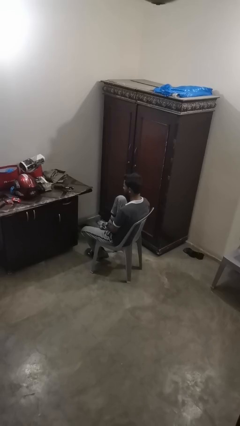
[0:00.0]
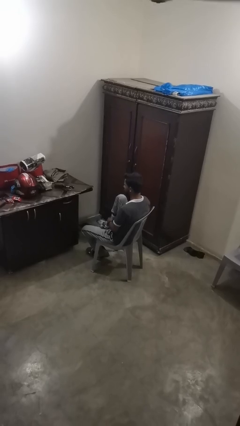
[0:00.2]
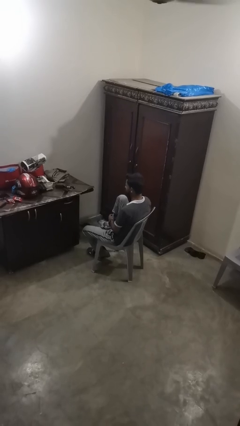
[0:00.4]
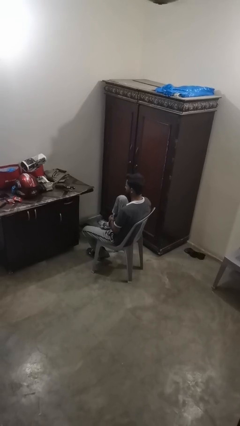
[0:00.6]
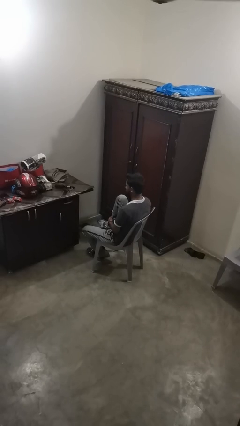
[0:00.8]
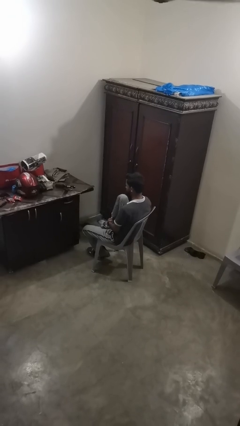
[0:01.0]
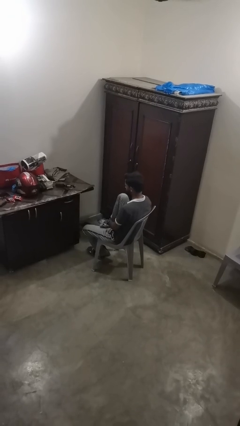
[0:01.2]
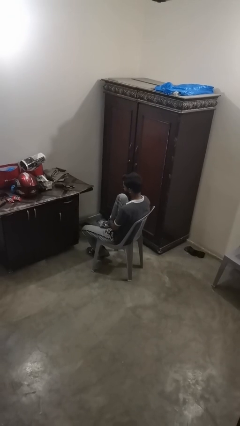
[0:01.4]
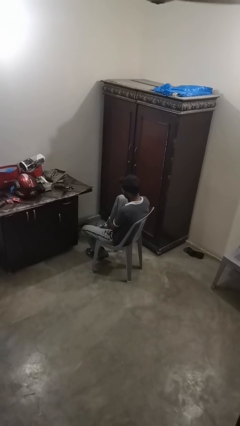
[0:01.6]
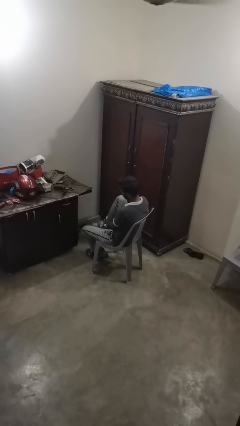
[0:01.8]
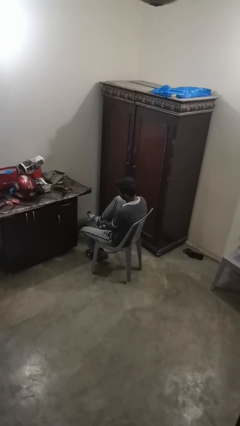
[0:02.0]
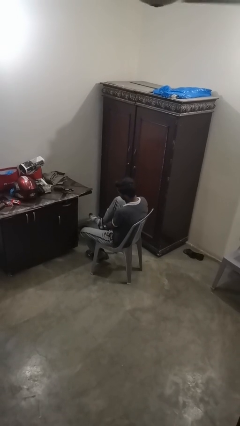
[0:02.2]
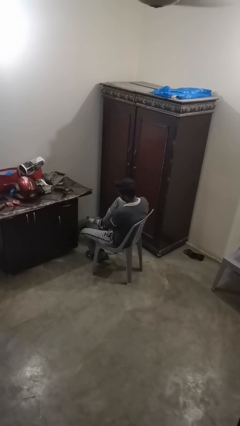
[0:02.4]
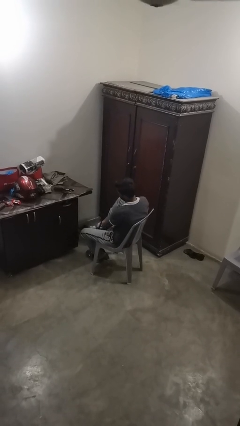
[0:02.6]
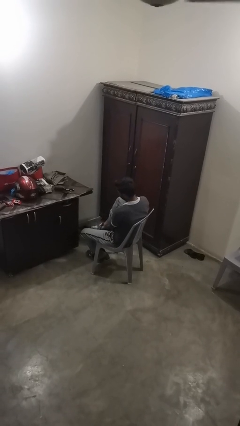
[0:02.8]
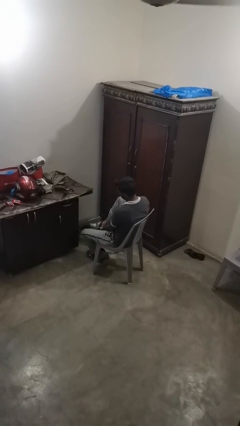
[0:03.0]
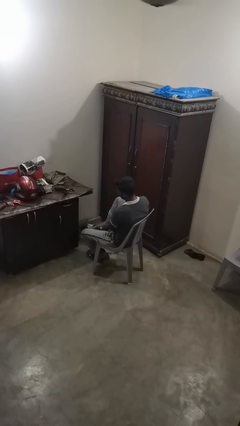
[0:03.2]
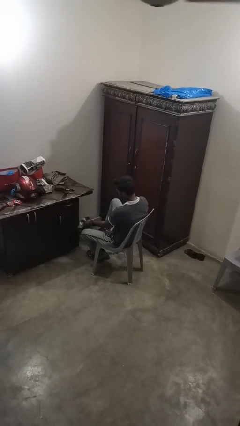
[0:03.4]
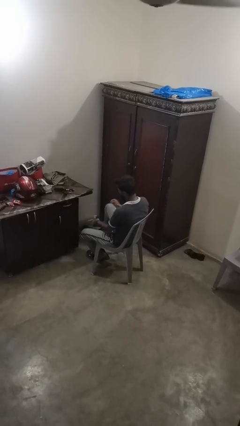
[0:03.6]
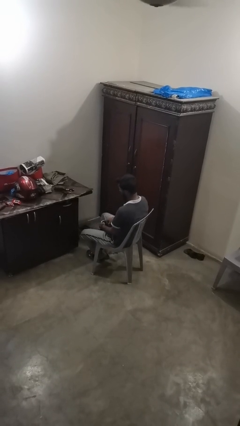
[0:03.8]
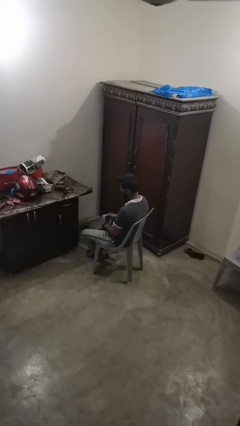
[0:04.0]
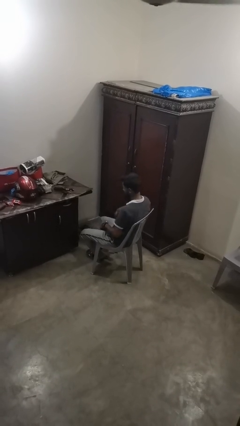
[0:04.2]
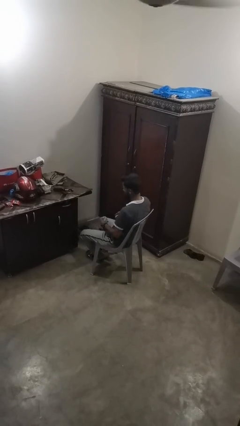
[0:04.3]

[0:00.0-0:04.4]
person takes off socks

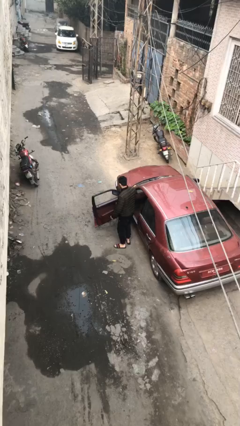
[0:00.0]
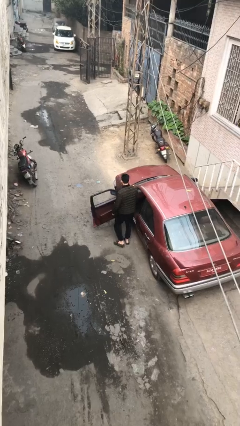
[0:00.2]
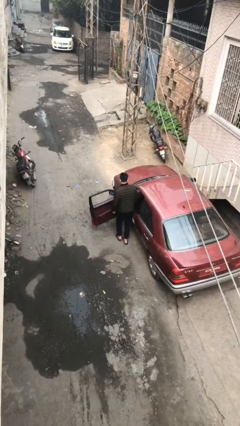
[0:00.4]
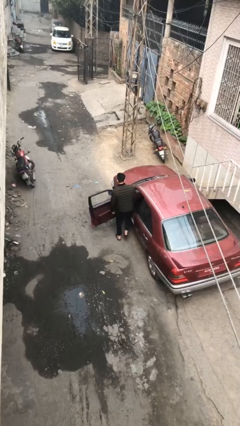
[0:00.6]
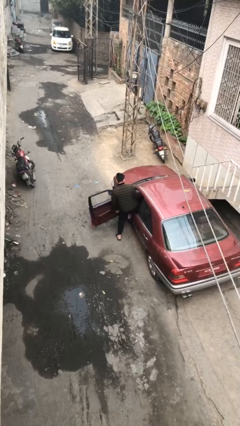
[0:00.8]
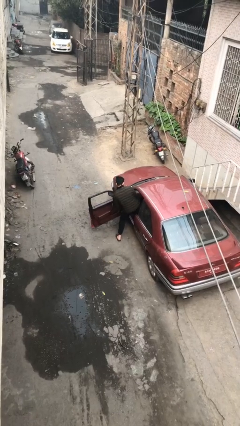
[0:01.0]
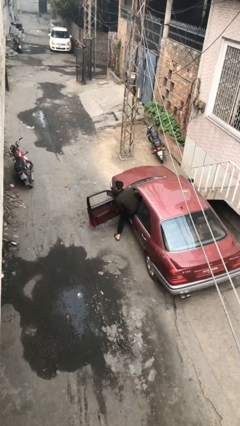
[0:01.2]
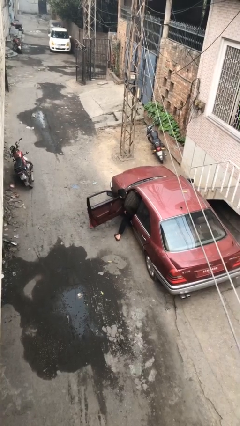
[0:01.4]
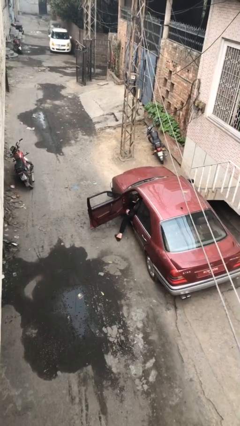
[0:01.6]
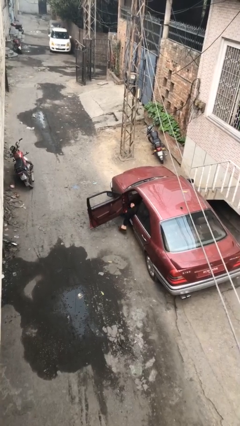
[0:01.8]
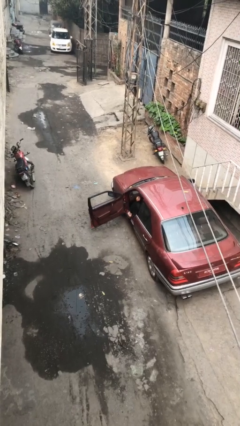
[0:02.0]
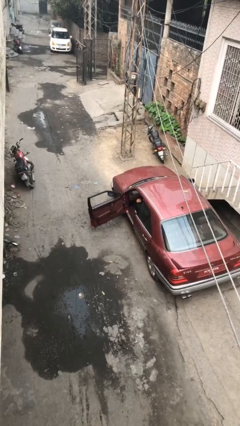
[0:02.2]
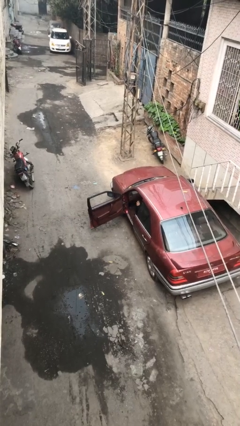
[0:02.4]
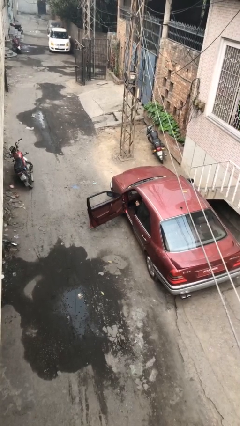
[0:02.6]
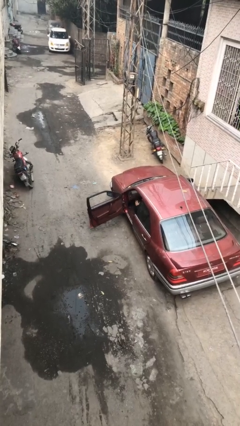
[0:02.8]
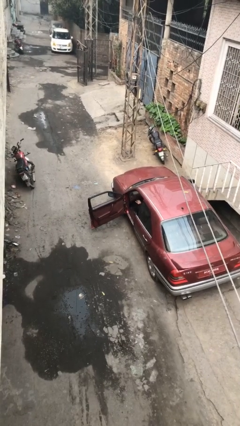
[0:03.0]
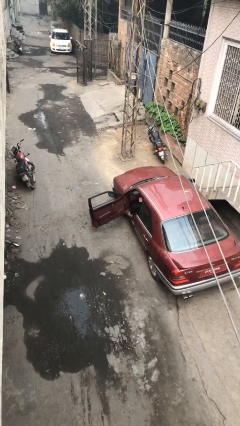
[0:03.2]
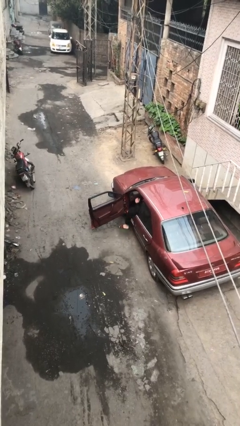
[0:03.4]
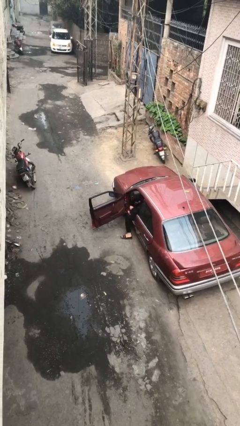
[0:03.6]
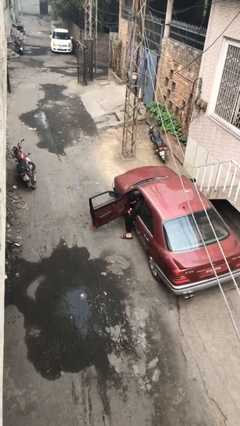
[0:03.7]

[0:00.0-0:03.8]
person enters car

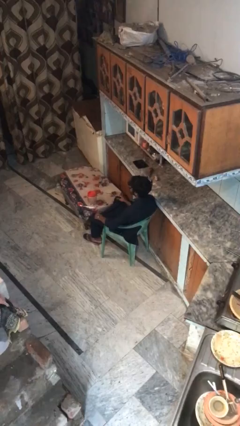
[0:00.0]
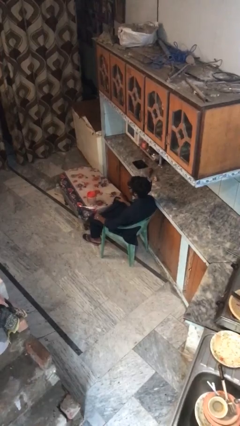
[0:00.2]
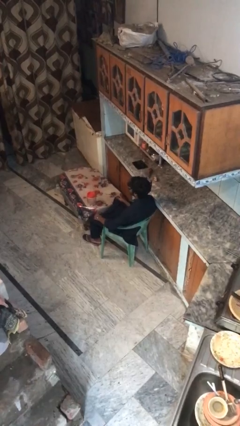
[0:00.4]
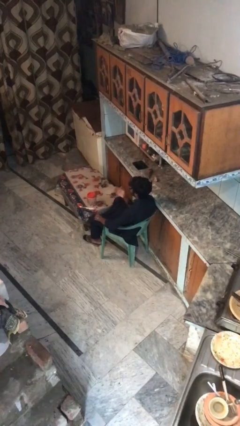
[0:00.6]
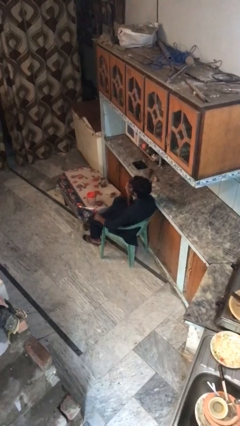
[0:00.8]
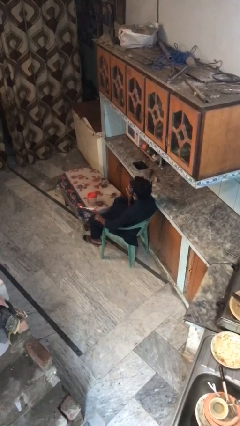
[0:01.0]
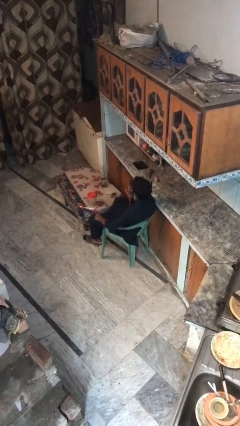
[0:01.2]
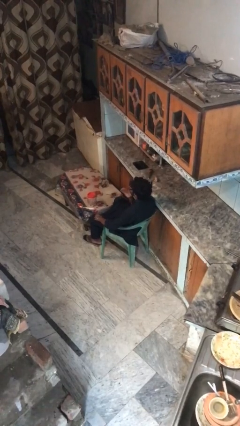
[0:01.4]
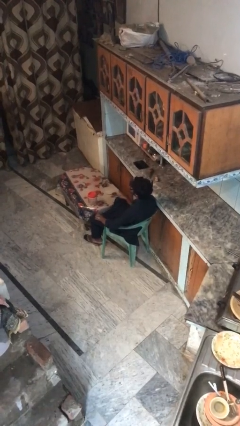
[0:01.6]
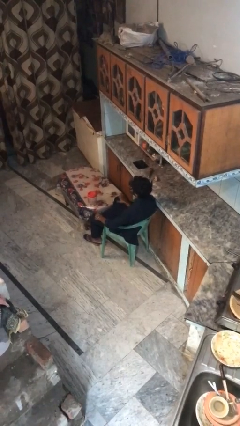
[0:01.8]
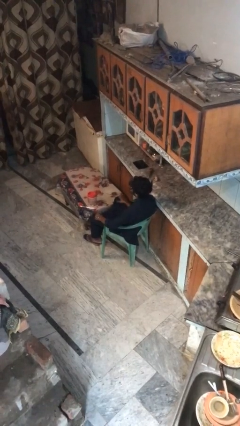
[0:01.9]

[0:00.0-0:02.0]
person licks fingers

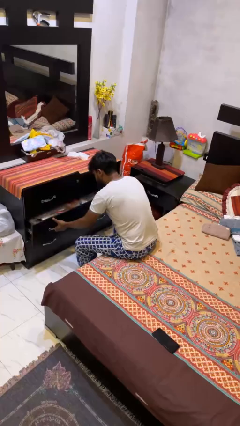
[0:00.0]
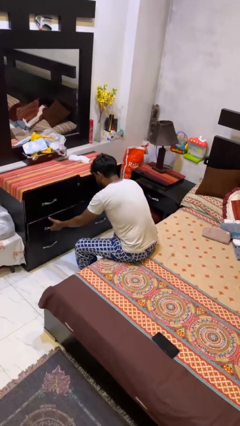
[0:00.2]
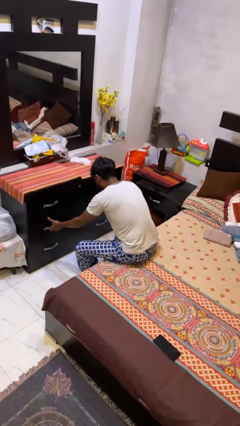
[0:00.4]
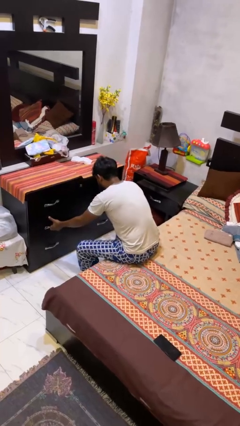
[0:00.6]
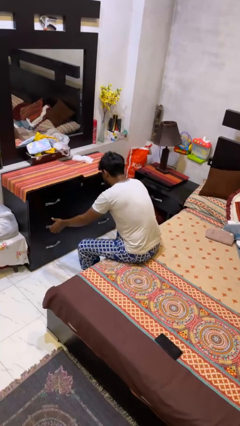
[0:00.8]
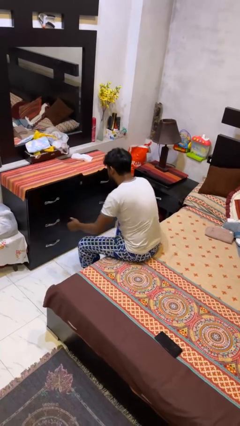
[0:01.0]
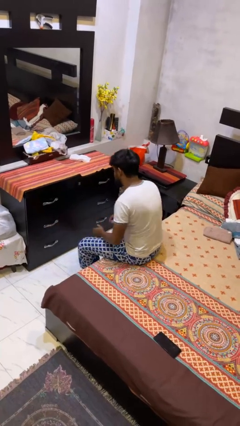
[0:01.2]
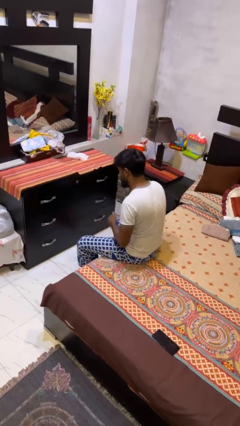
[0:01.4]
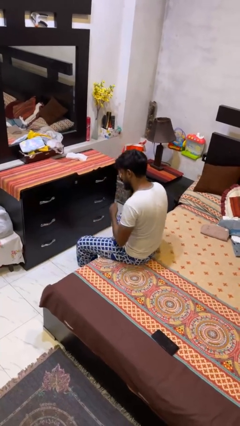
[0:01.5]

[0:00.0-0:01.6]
person closes dresser drawer

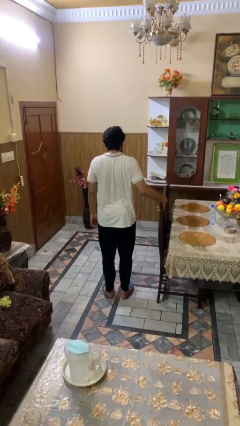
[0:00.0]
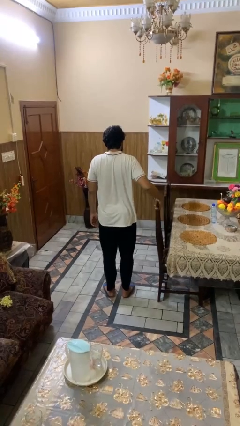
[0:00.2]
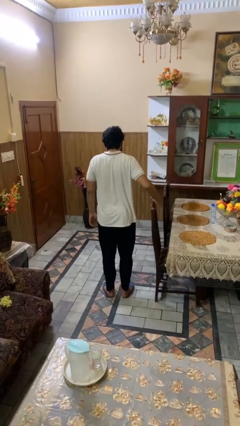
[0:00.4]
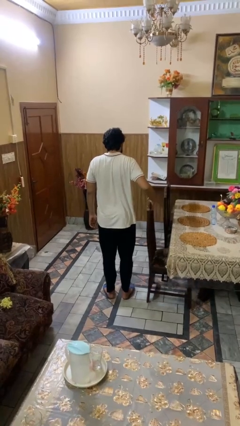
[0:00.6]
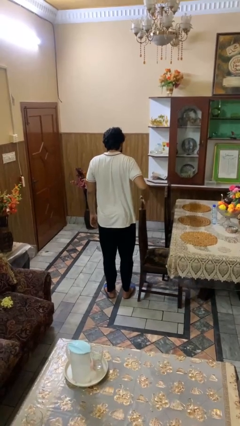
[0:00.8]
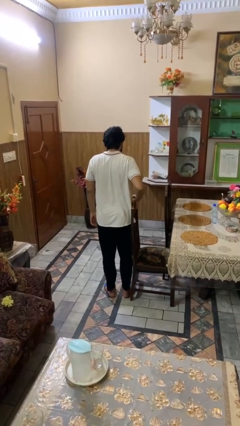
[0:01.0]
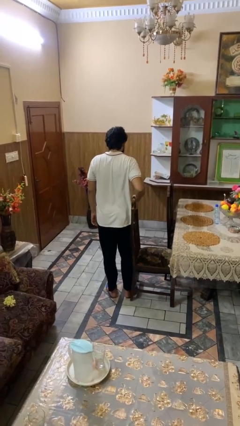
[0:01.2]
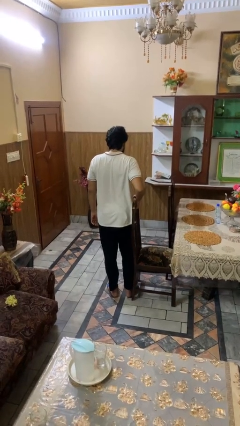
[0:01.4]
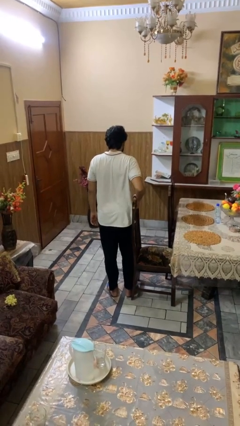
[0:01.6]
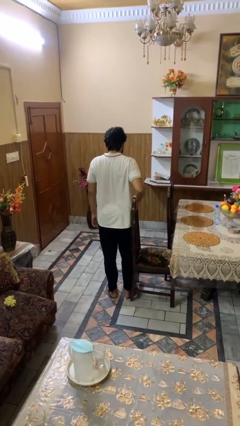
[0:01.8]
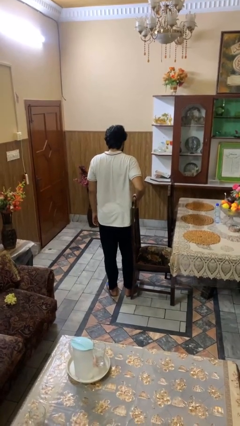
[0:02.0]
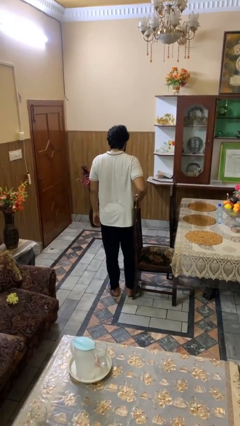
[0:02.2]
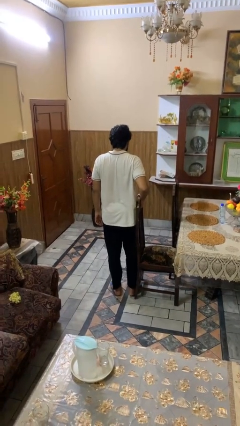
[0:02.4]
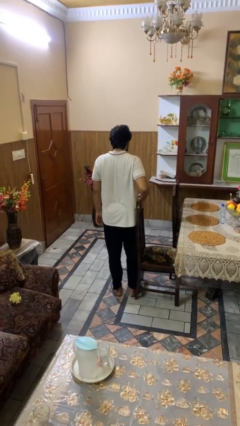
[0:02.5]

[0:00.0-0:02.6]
person pulls out chair

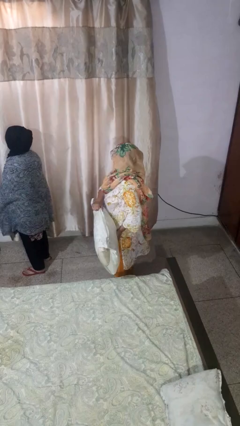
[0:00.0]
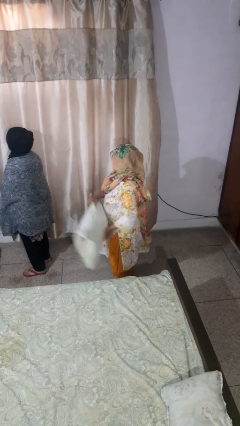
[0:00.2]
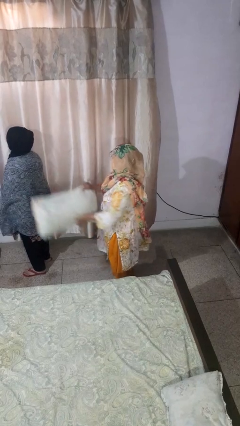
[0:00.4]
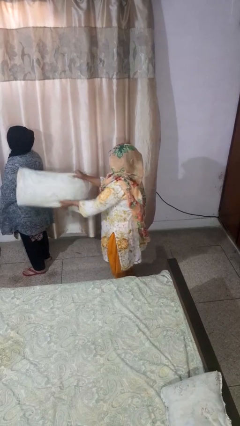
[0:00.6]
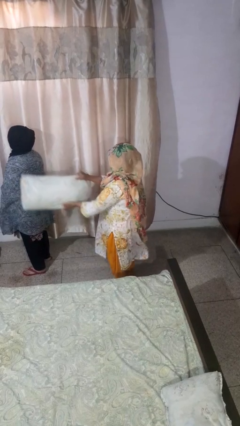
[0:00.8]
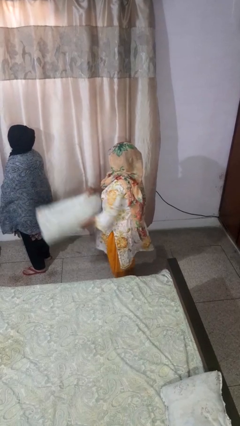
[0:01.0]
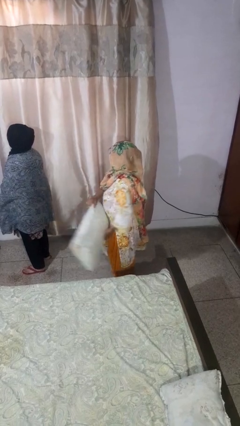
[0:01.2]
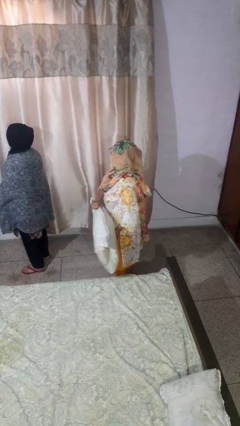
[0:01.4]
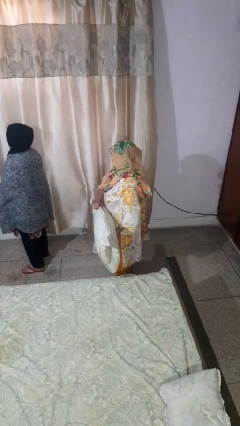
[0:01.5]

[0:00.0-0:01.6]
person hits person with pillow

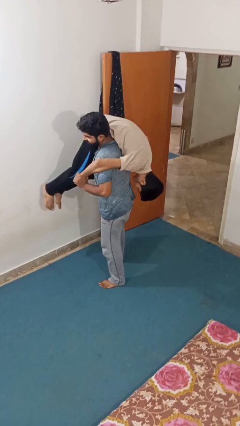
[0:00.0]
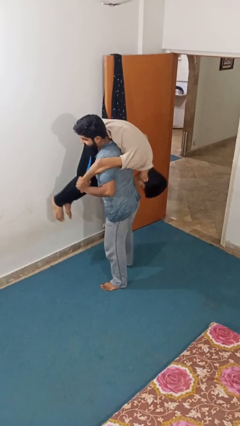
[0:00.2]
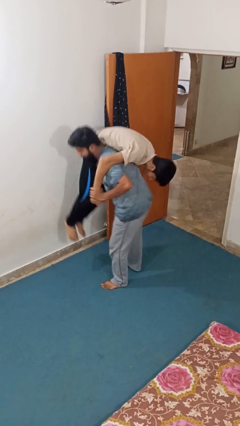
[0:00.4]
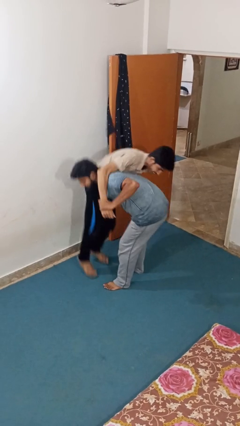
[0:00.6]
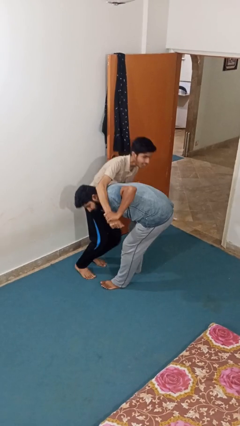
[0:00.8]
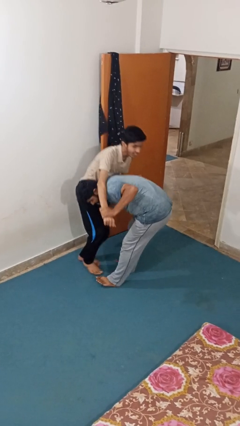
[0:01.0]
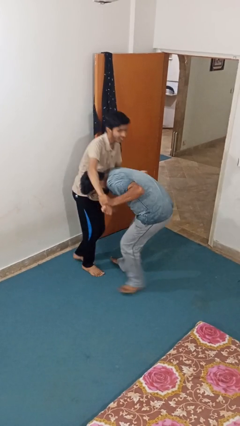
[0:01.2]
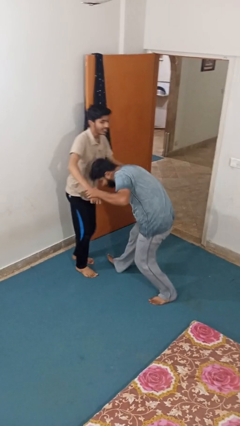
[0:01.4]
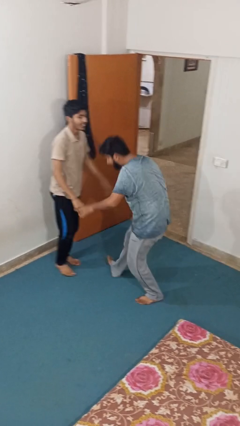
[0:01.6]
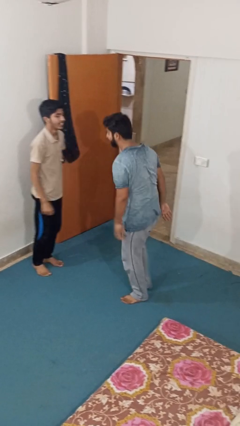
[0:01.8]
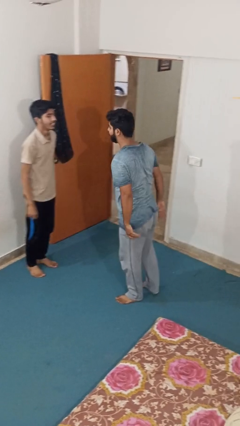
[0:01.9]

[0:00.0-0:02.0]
person puts down person
